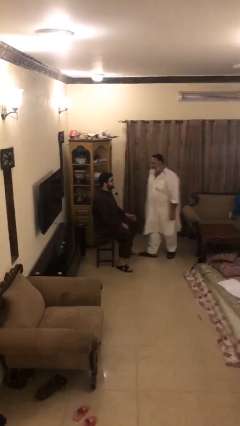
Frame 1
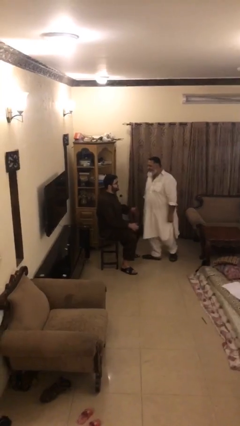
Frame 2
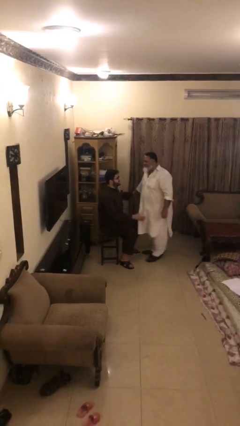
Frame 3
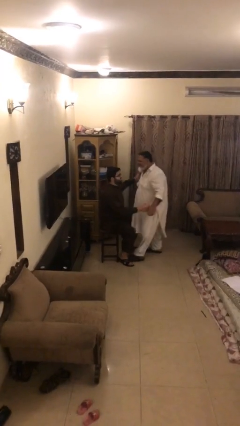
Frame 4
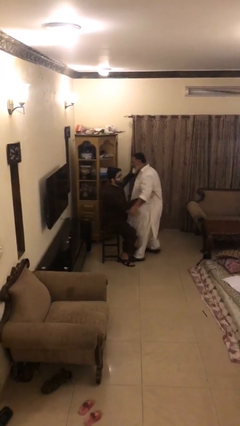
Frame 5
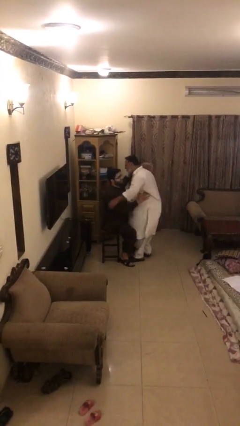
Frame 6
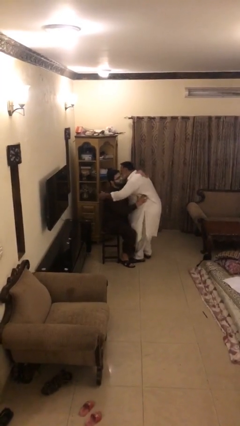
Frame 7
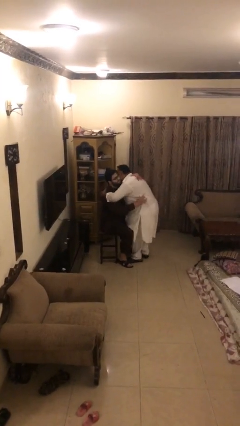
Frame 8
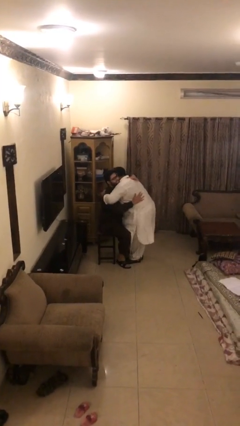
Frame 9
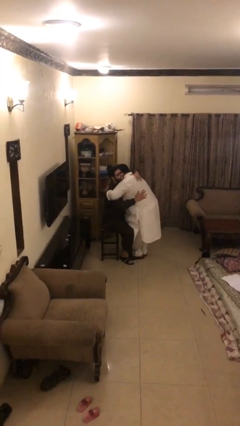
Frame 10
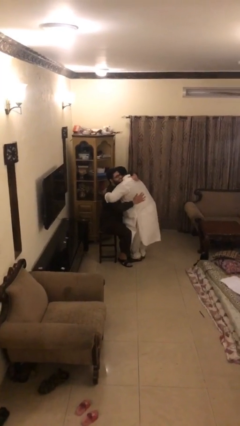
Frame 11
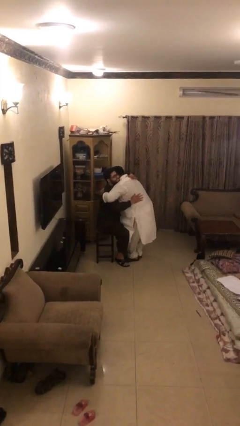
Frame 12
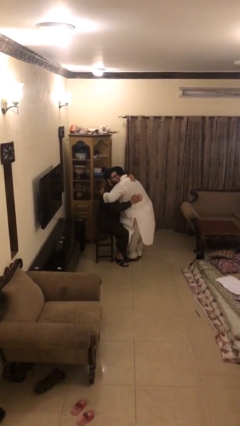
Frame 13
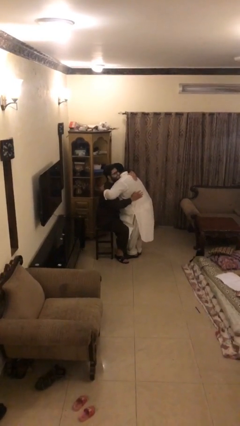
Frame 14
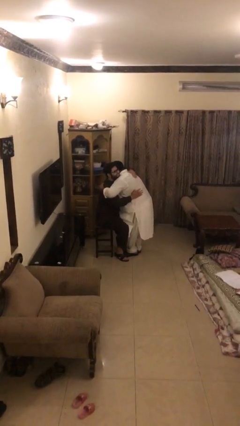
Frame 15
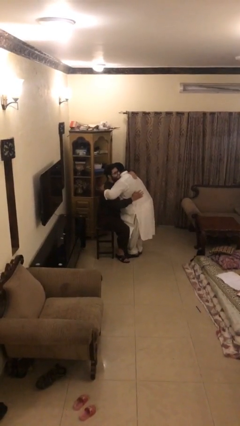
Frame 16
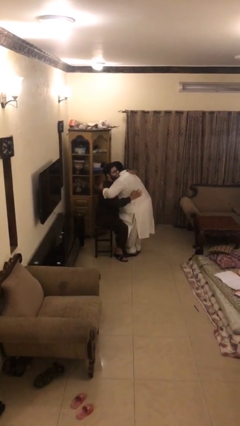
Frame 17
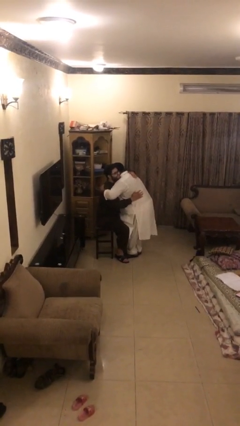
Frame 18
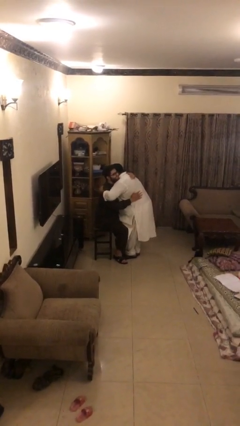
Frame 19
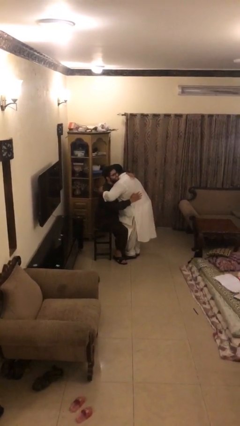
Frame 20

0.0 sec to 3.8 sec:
person embraces person

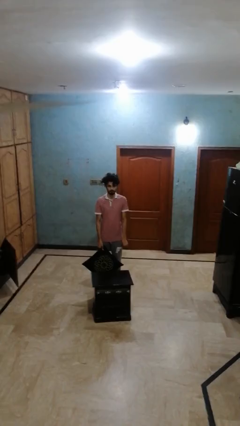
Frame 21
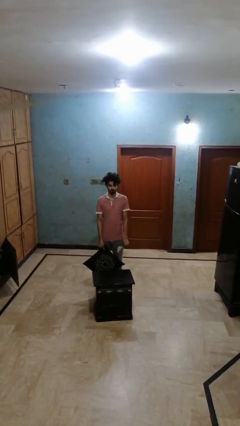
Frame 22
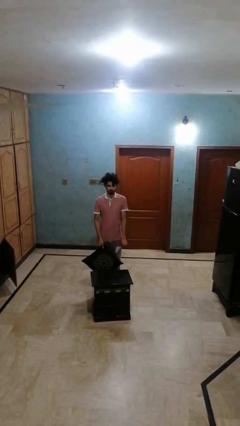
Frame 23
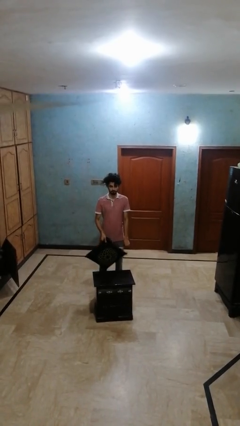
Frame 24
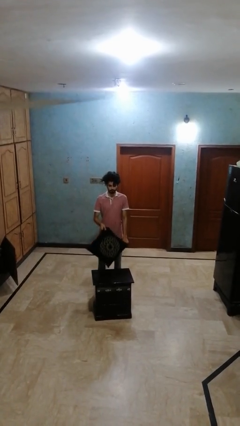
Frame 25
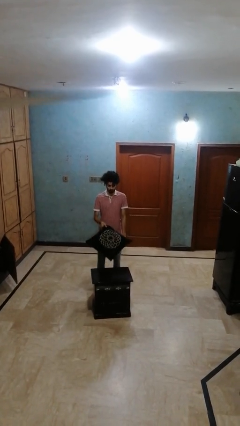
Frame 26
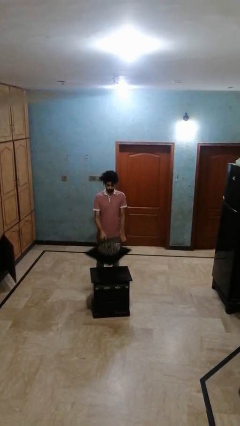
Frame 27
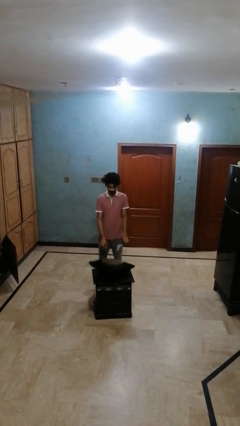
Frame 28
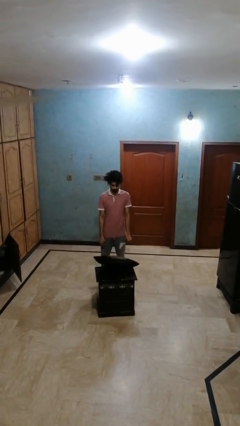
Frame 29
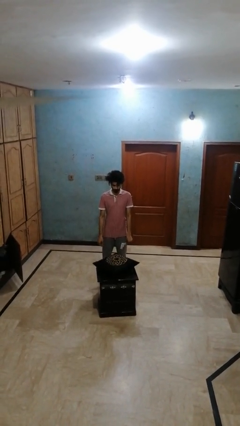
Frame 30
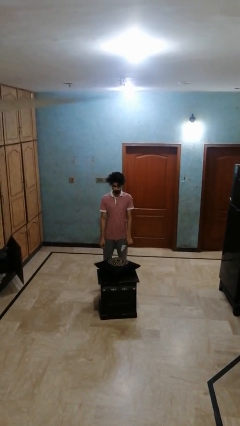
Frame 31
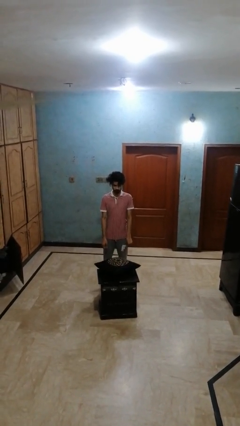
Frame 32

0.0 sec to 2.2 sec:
person throws object on table

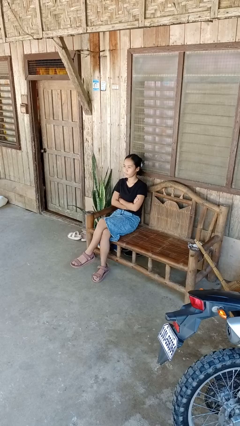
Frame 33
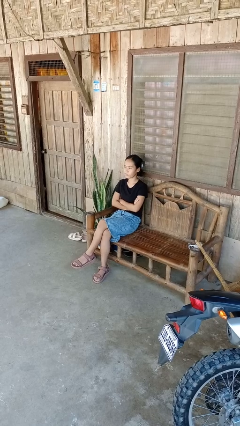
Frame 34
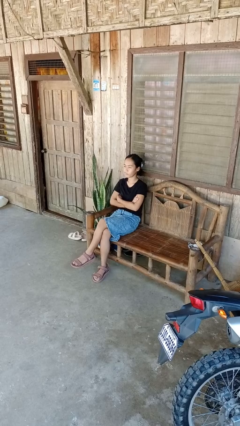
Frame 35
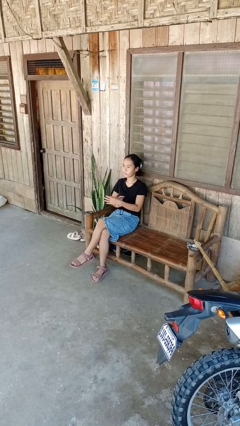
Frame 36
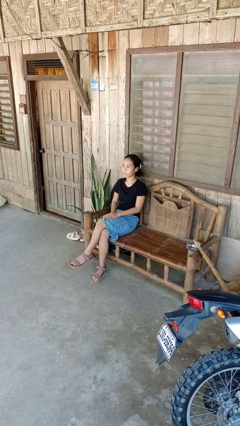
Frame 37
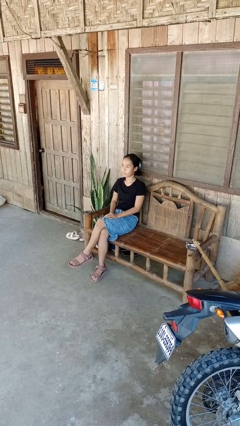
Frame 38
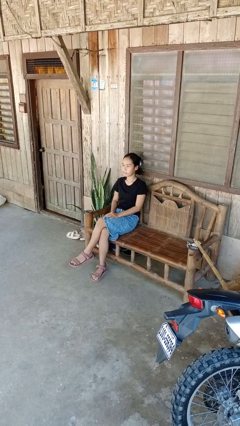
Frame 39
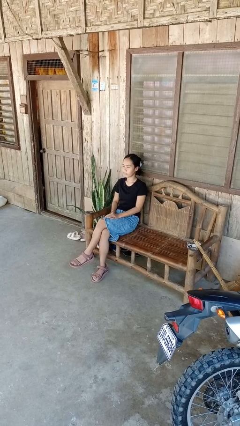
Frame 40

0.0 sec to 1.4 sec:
person crosses arms

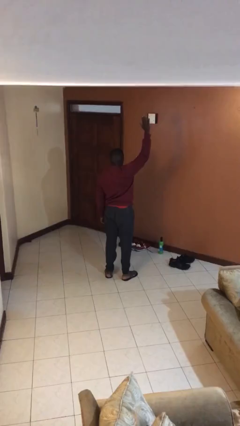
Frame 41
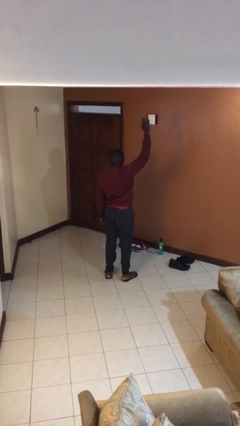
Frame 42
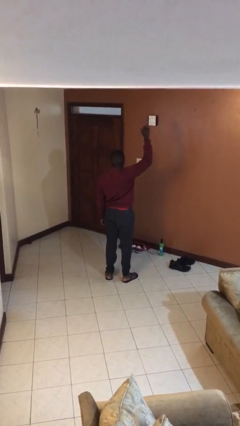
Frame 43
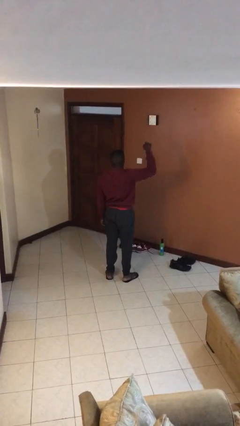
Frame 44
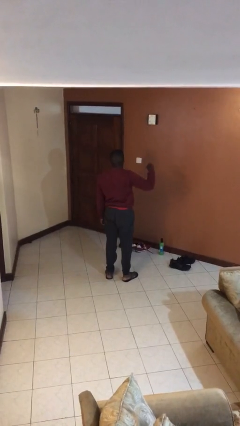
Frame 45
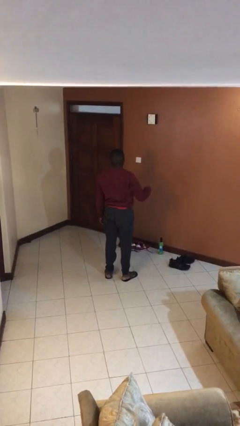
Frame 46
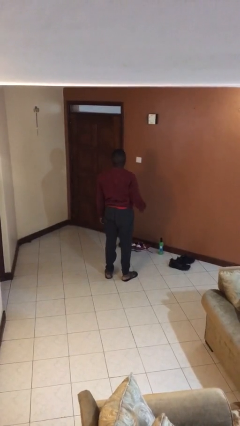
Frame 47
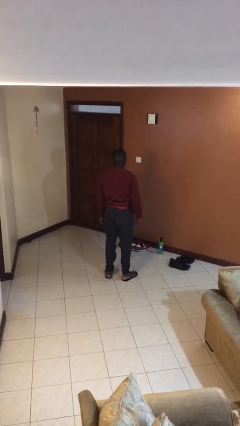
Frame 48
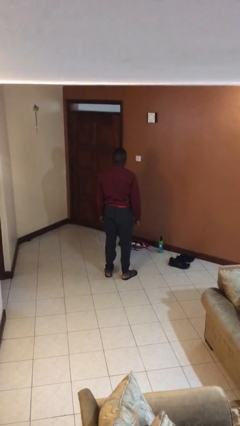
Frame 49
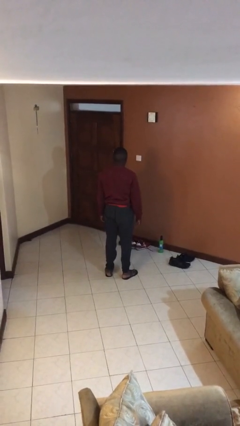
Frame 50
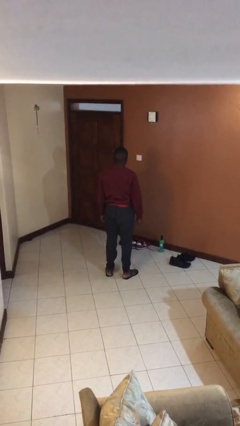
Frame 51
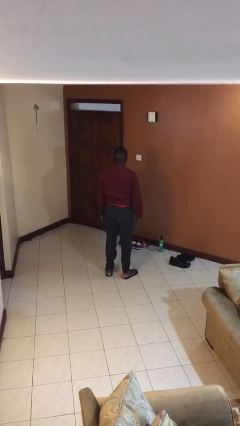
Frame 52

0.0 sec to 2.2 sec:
person gestures lower hand

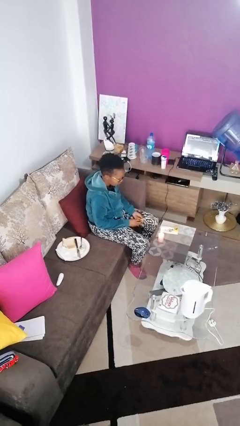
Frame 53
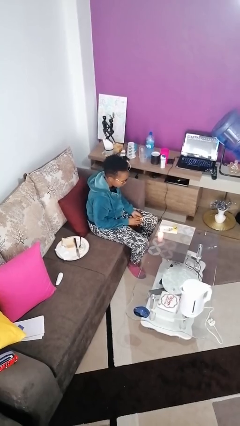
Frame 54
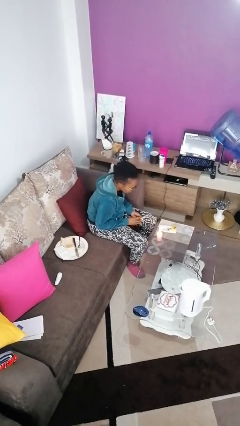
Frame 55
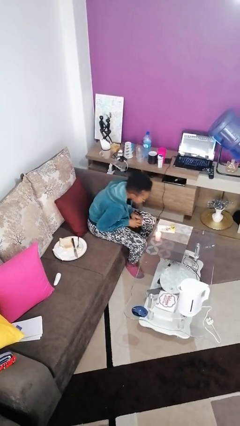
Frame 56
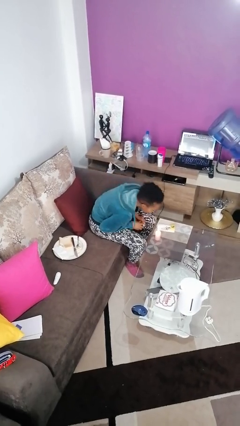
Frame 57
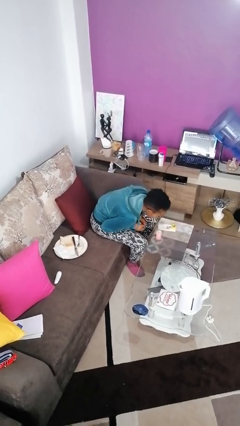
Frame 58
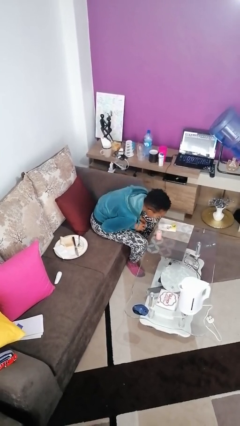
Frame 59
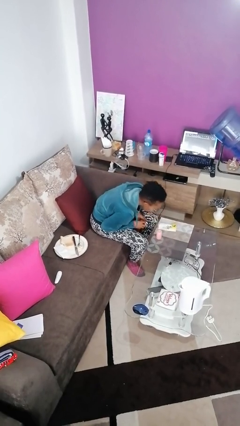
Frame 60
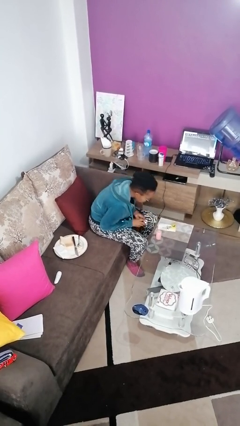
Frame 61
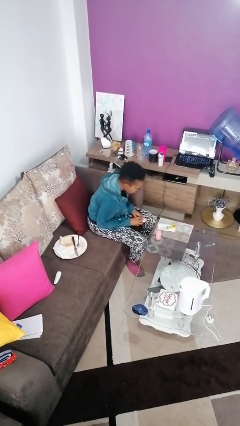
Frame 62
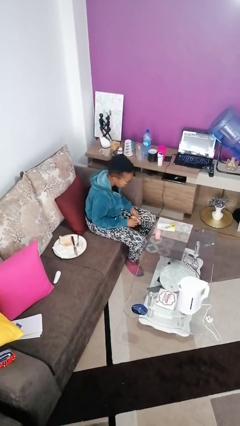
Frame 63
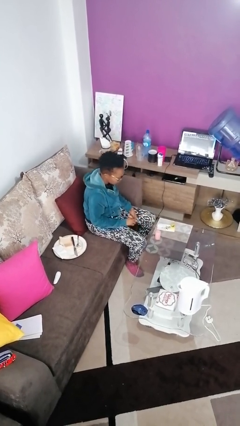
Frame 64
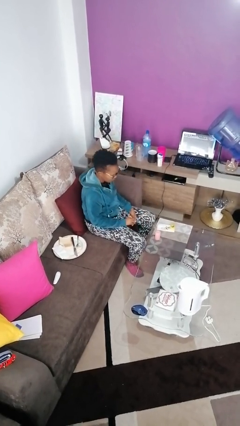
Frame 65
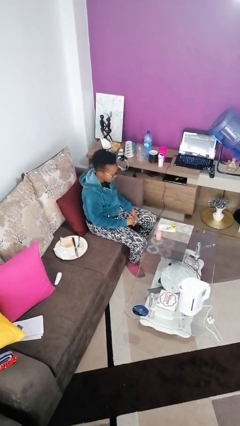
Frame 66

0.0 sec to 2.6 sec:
person extinguishes candle

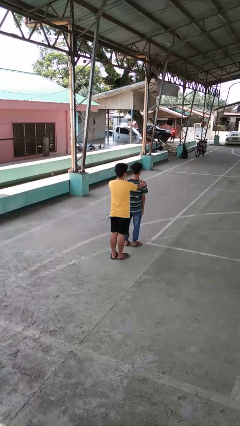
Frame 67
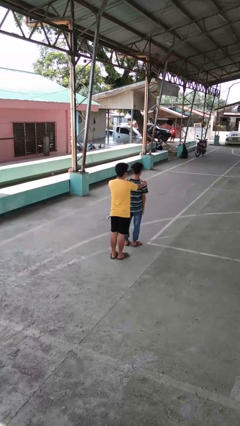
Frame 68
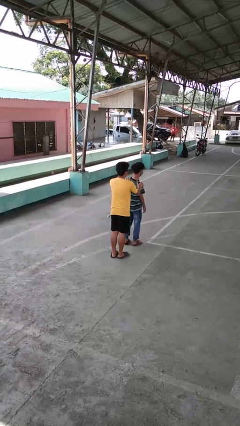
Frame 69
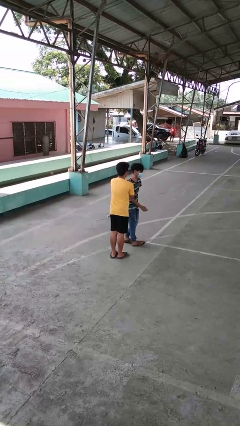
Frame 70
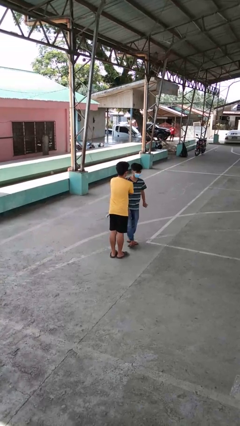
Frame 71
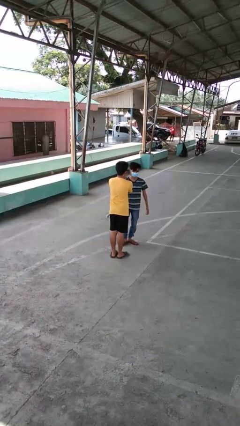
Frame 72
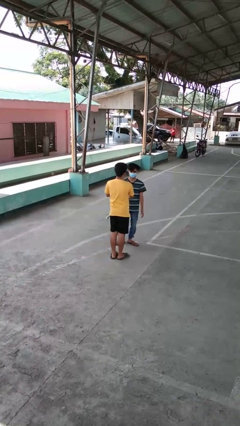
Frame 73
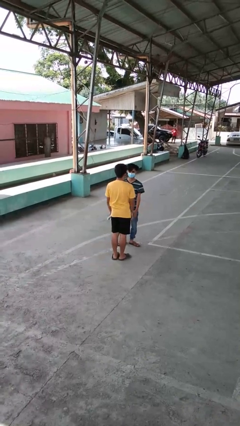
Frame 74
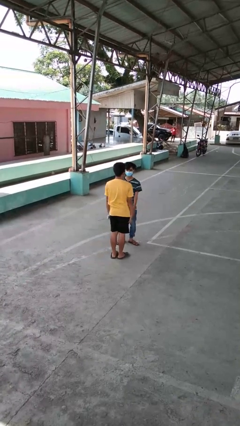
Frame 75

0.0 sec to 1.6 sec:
person spins person around

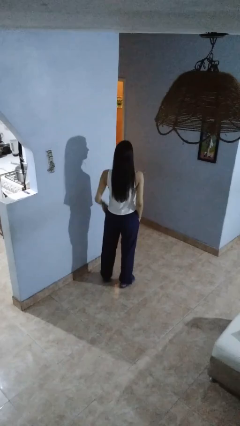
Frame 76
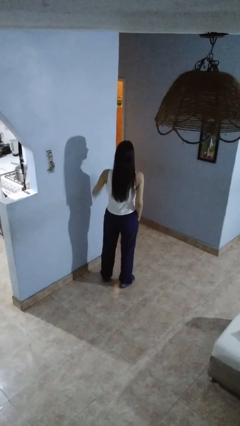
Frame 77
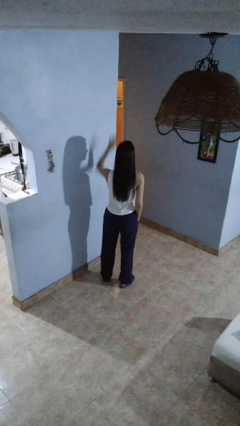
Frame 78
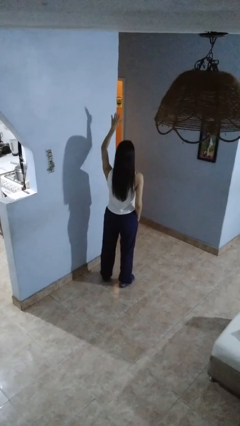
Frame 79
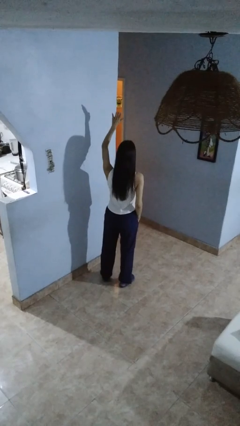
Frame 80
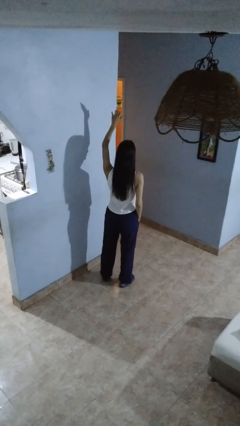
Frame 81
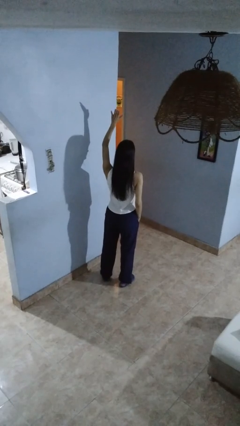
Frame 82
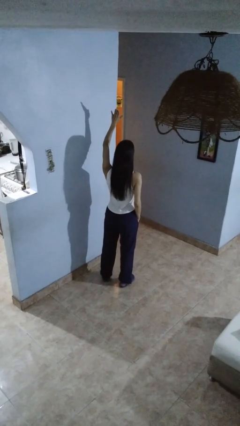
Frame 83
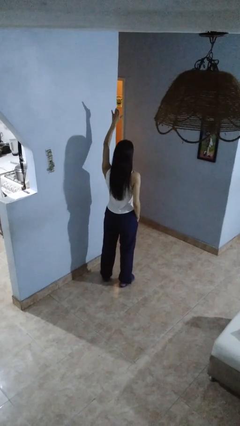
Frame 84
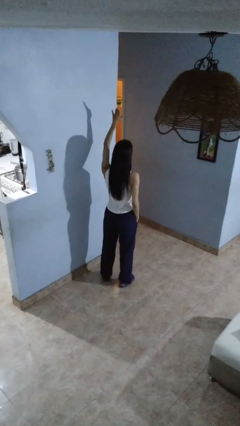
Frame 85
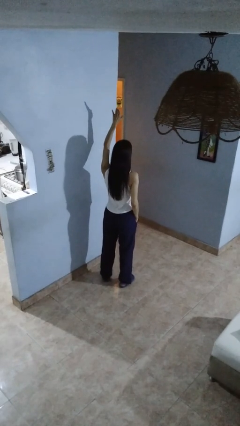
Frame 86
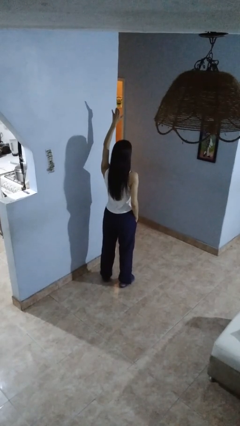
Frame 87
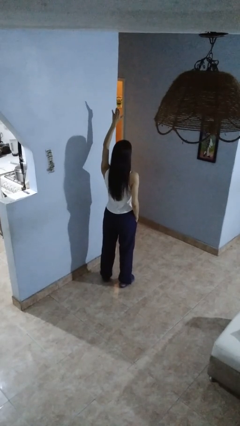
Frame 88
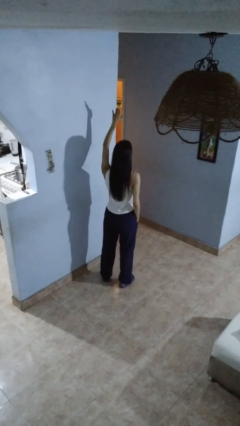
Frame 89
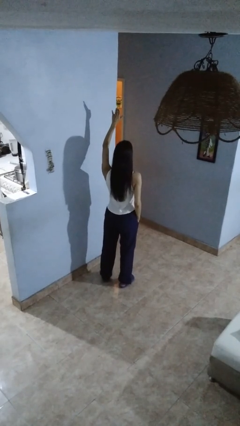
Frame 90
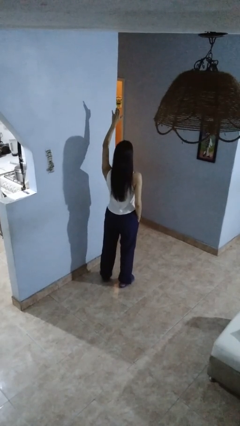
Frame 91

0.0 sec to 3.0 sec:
person gestures raise hand
